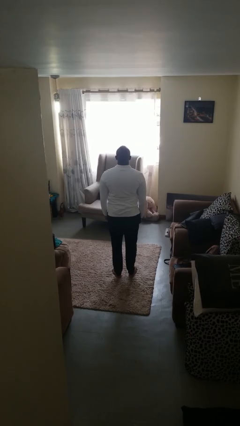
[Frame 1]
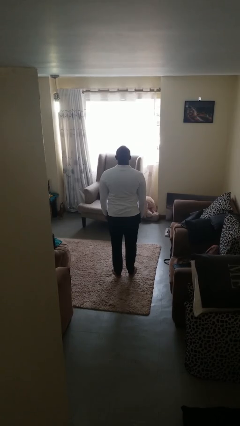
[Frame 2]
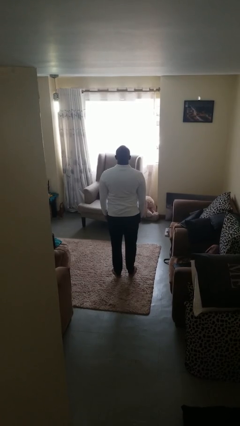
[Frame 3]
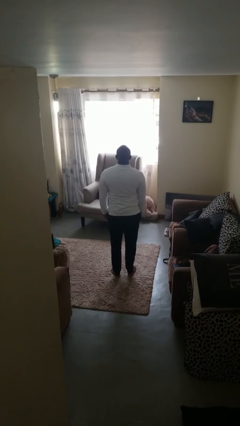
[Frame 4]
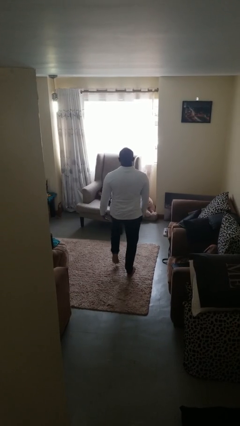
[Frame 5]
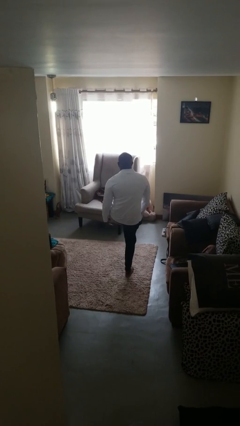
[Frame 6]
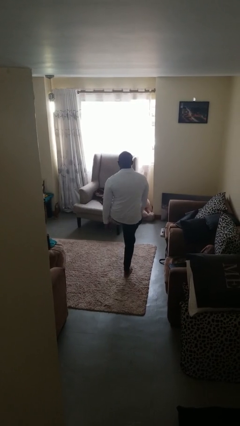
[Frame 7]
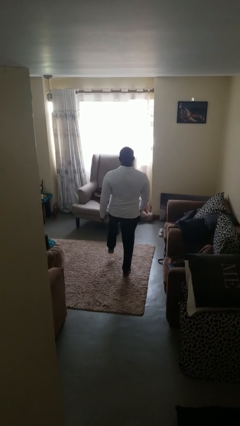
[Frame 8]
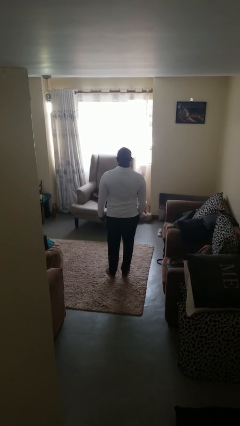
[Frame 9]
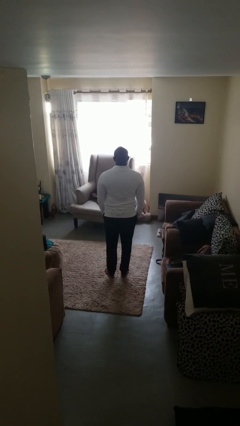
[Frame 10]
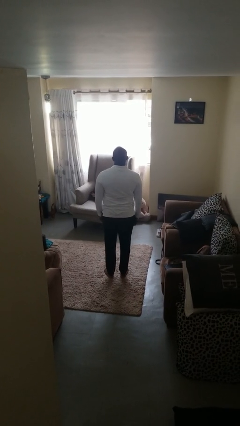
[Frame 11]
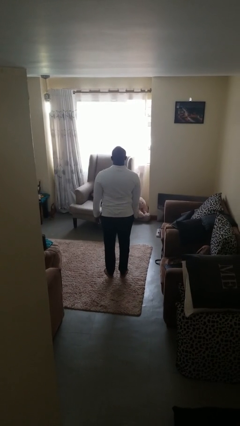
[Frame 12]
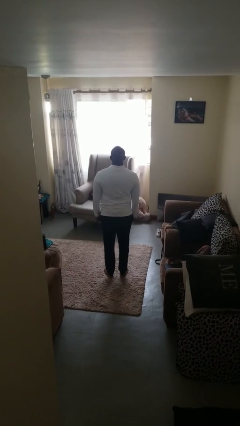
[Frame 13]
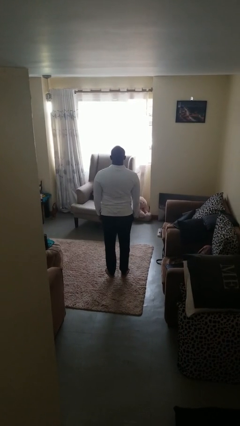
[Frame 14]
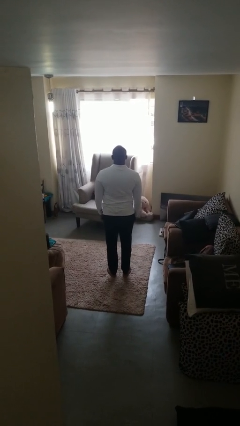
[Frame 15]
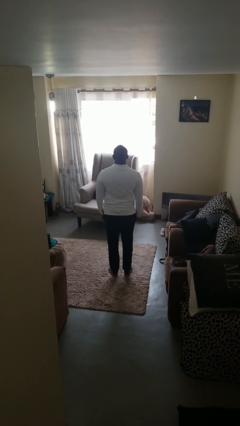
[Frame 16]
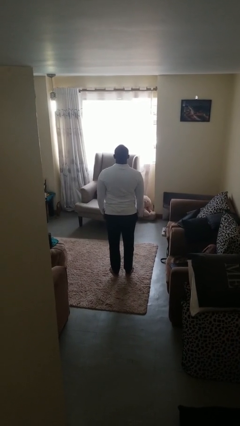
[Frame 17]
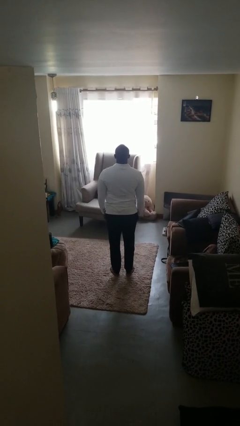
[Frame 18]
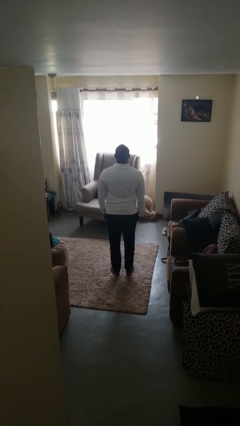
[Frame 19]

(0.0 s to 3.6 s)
person karate kicks

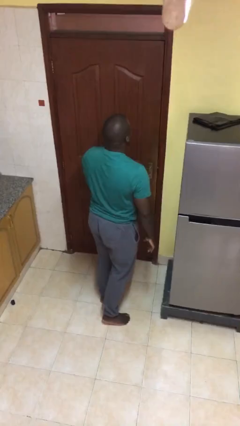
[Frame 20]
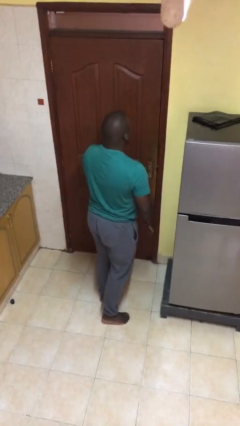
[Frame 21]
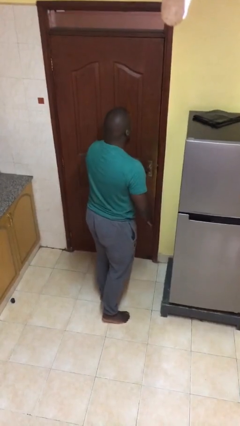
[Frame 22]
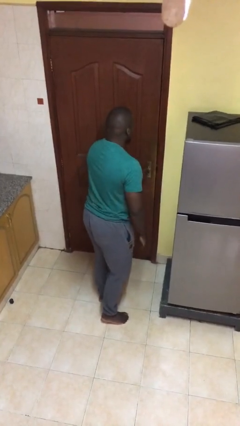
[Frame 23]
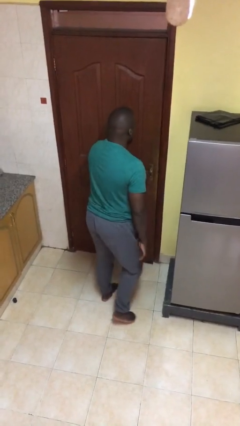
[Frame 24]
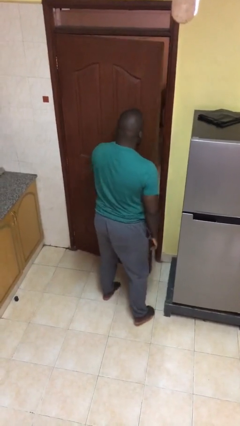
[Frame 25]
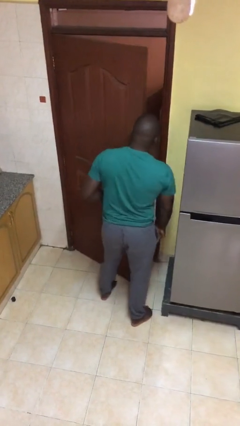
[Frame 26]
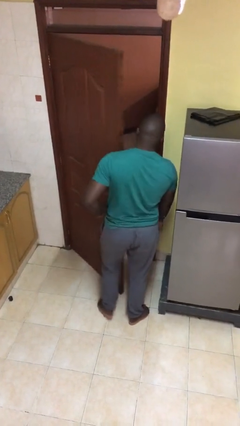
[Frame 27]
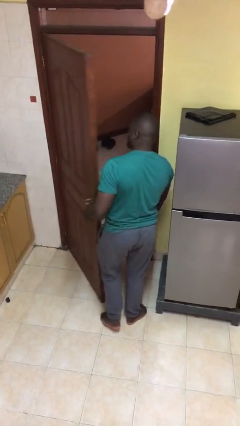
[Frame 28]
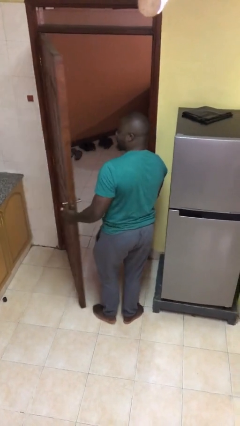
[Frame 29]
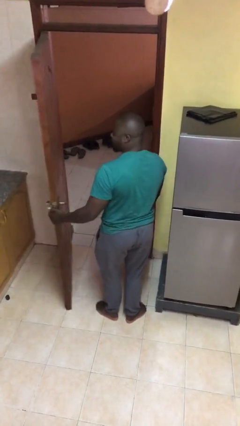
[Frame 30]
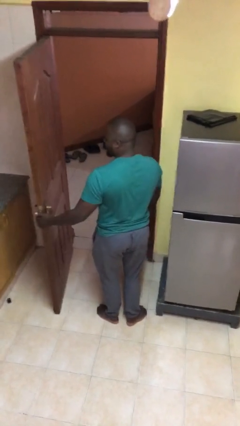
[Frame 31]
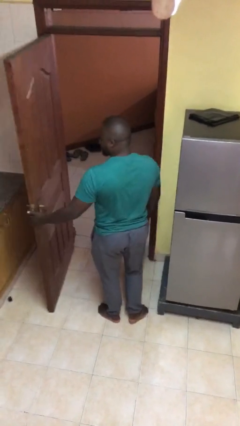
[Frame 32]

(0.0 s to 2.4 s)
person opens facility door

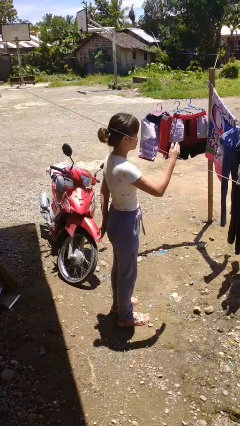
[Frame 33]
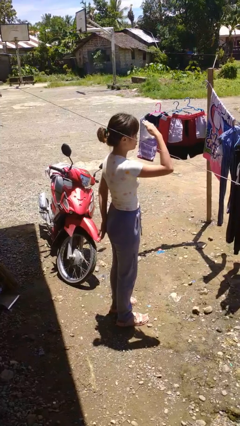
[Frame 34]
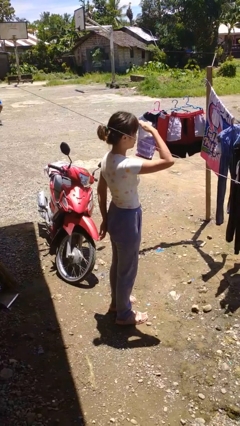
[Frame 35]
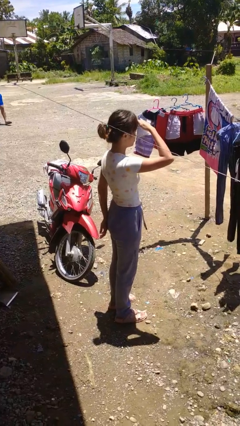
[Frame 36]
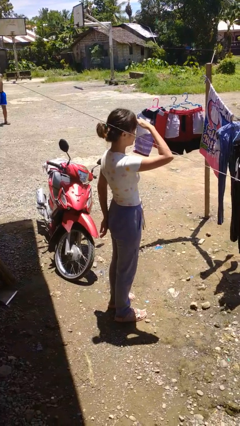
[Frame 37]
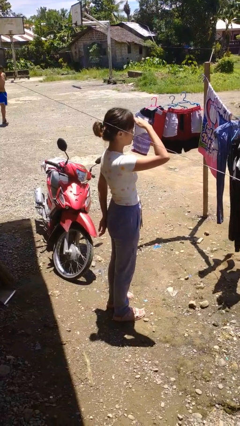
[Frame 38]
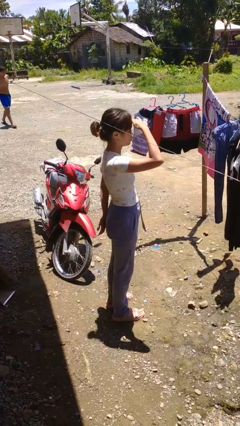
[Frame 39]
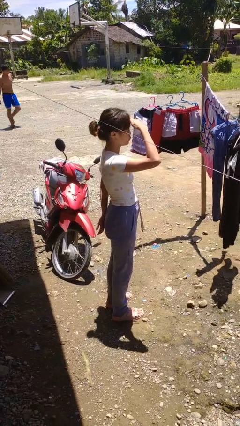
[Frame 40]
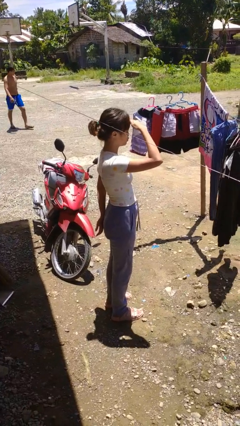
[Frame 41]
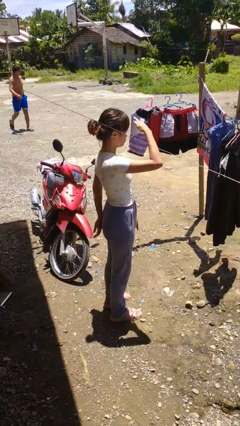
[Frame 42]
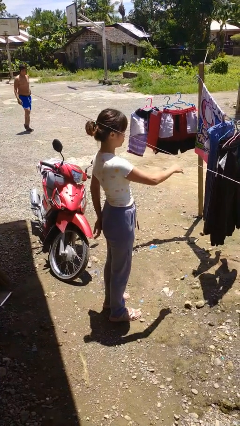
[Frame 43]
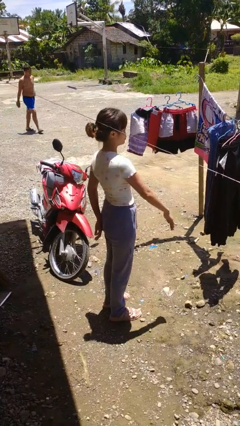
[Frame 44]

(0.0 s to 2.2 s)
person shades eyes

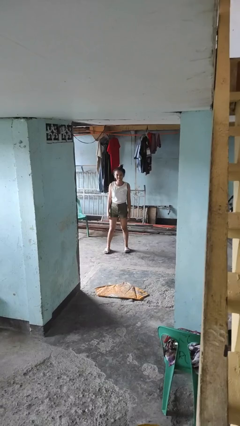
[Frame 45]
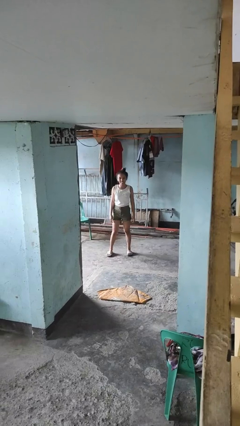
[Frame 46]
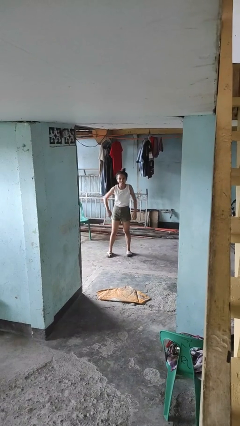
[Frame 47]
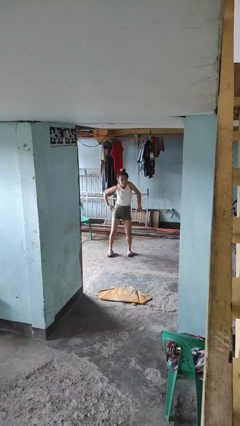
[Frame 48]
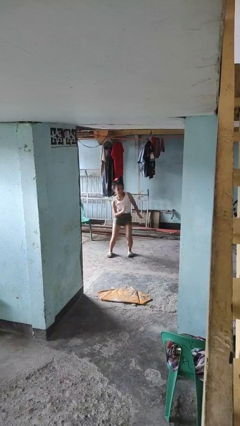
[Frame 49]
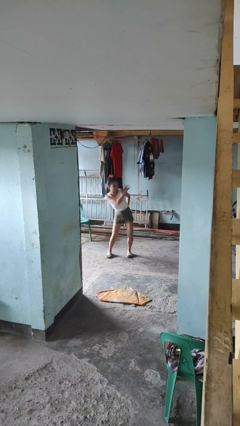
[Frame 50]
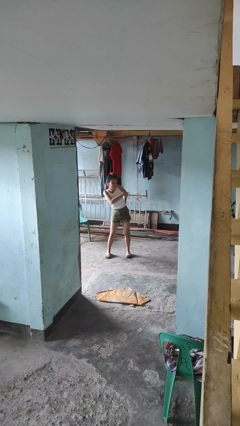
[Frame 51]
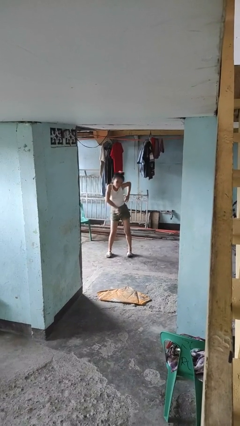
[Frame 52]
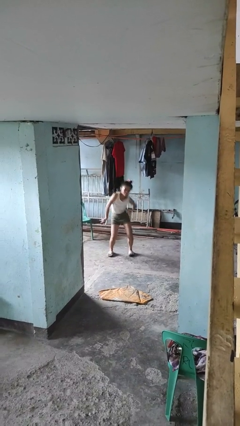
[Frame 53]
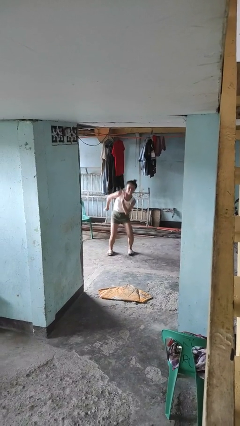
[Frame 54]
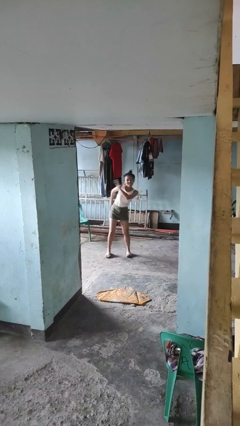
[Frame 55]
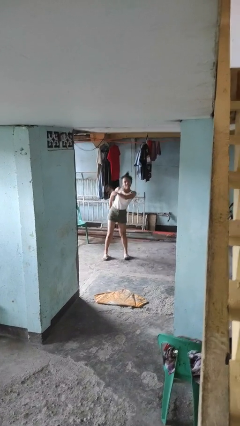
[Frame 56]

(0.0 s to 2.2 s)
person dances in place

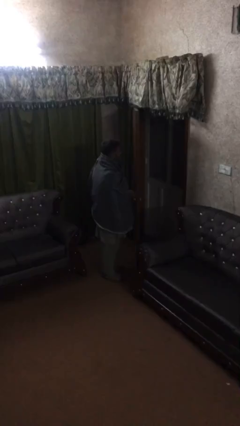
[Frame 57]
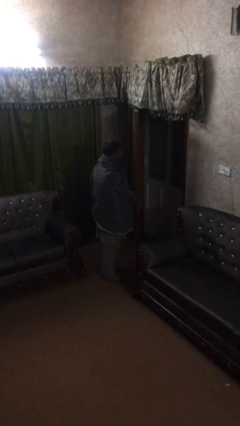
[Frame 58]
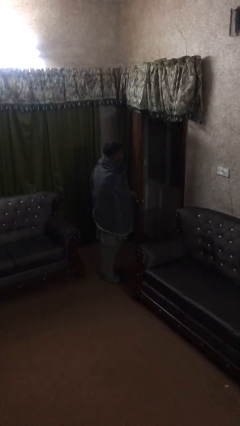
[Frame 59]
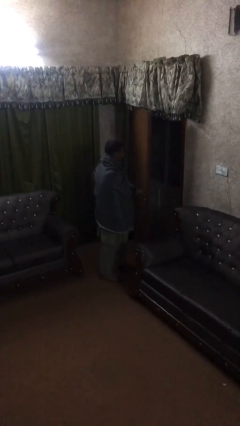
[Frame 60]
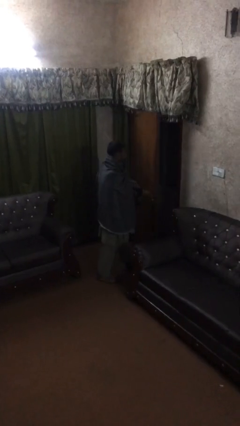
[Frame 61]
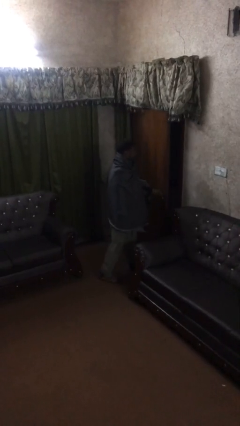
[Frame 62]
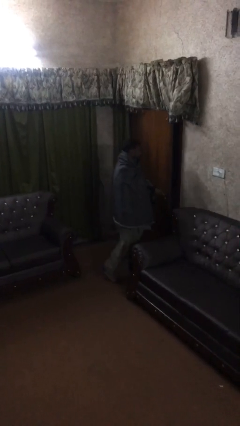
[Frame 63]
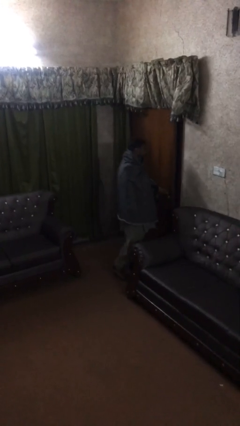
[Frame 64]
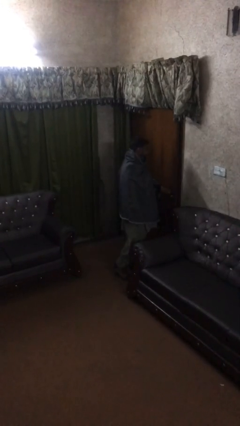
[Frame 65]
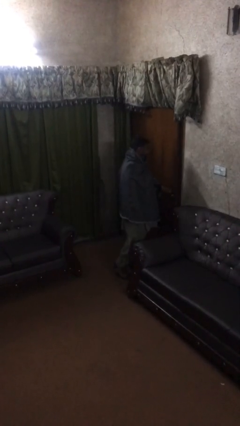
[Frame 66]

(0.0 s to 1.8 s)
person closes facility door

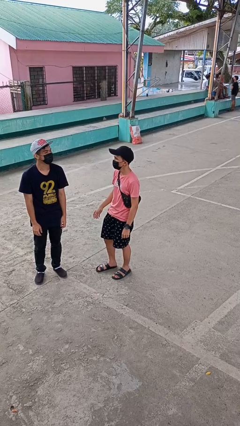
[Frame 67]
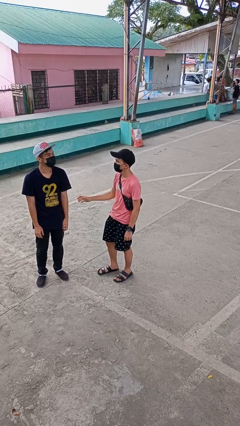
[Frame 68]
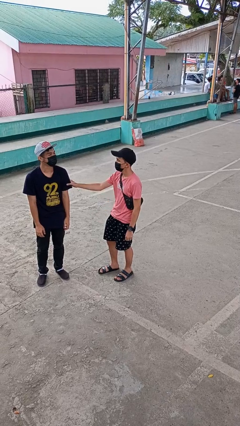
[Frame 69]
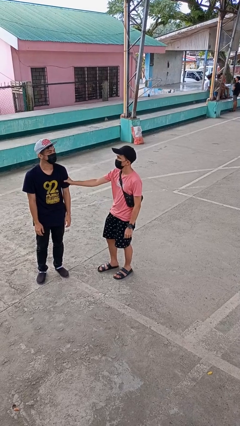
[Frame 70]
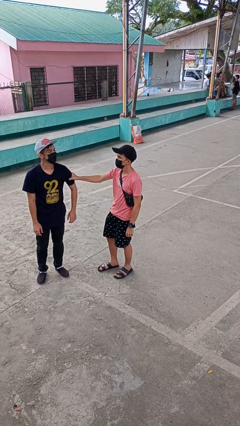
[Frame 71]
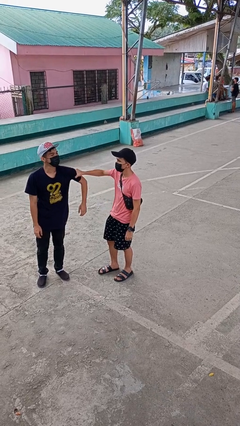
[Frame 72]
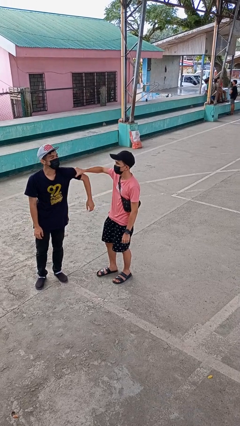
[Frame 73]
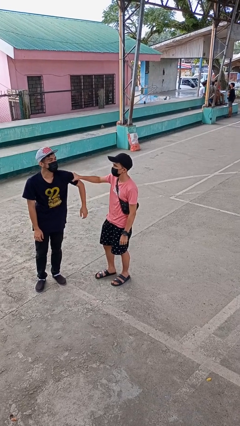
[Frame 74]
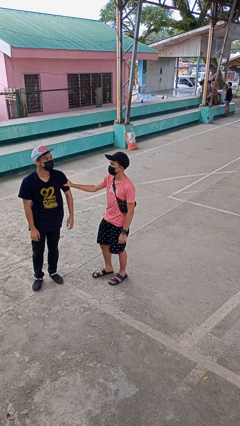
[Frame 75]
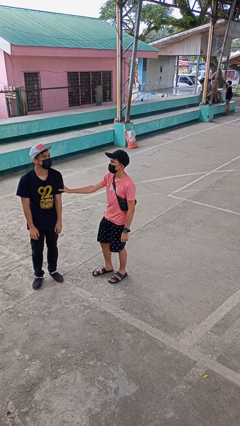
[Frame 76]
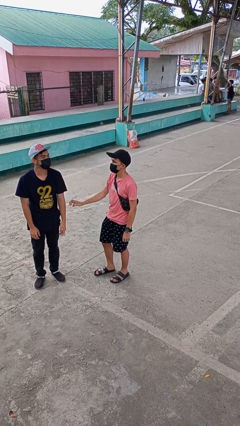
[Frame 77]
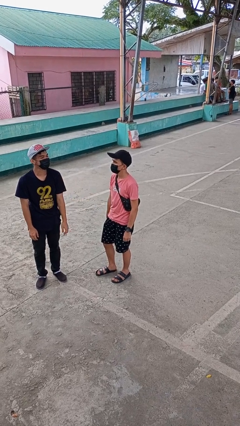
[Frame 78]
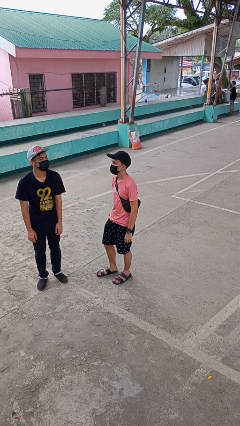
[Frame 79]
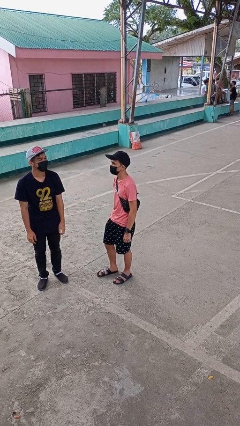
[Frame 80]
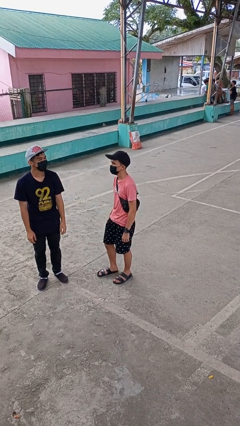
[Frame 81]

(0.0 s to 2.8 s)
person grabs person by bicep

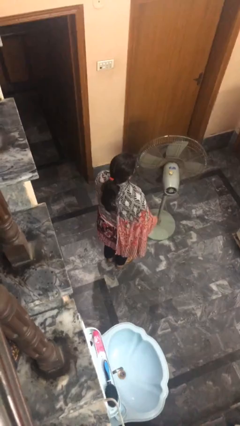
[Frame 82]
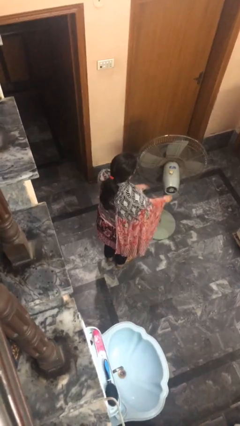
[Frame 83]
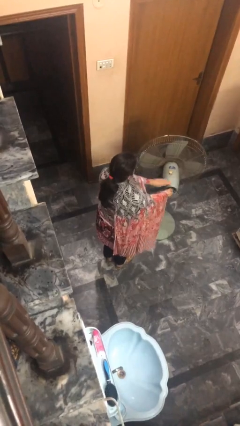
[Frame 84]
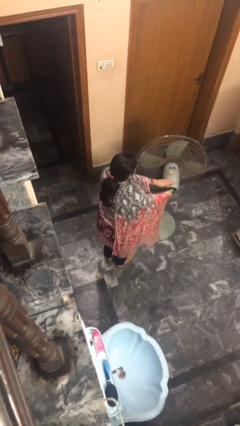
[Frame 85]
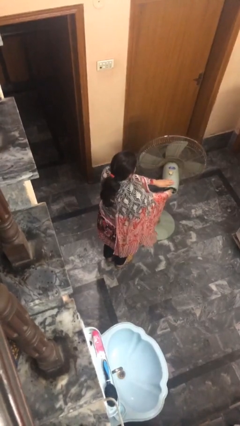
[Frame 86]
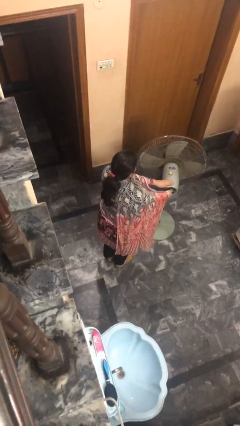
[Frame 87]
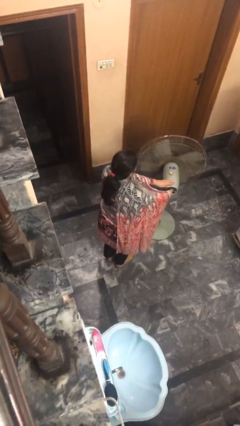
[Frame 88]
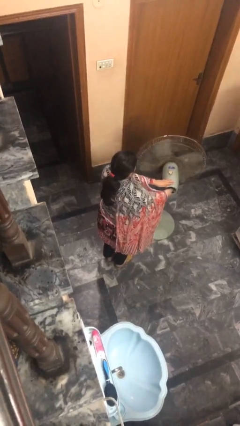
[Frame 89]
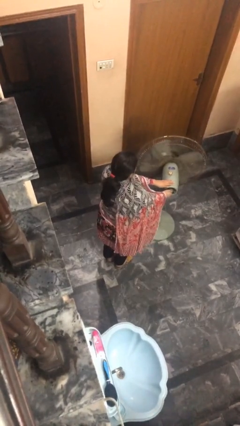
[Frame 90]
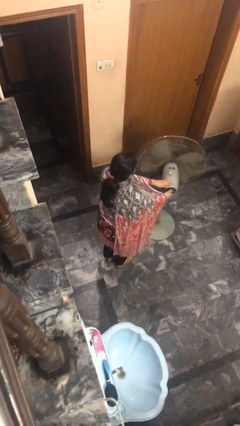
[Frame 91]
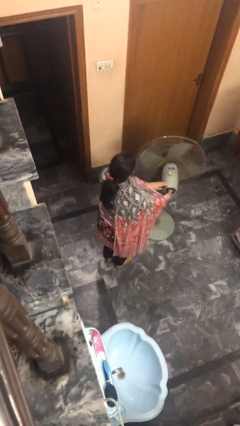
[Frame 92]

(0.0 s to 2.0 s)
person turns on fan
